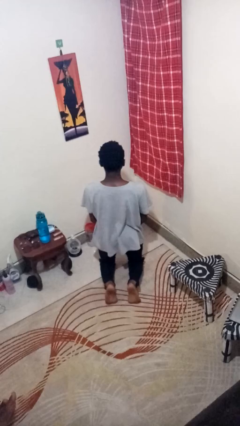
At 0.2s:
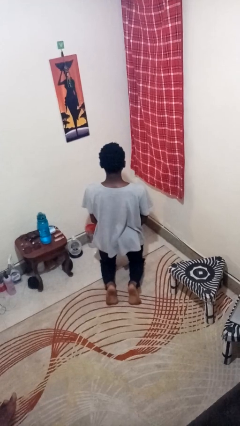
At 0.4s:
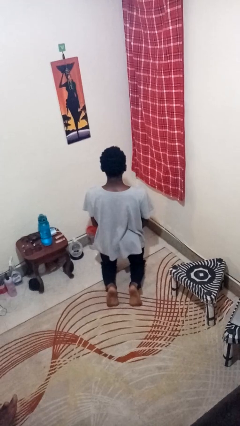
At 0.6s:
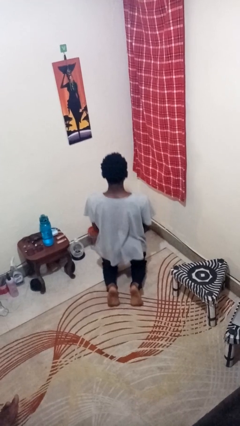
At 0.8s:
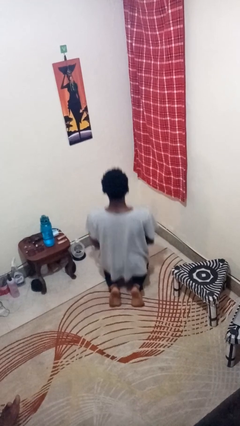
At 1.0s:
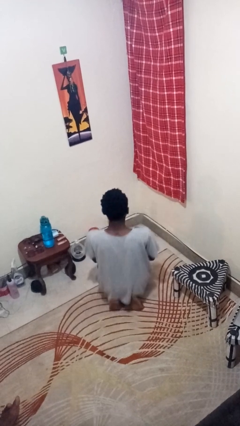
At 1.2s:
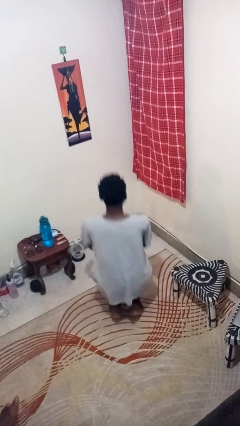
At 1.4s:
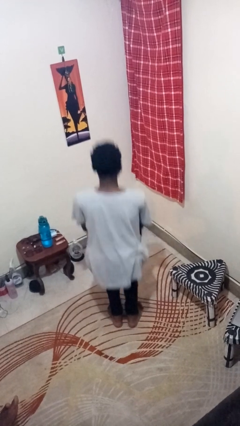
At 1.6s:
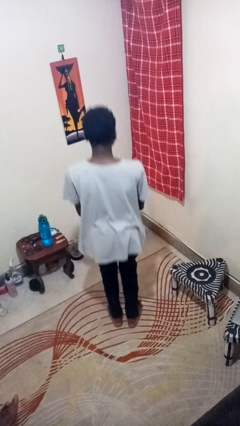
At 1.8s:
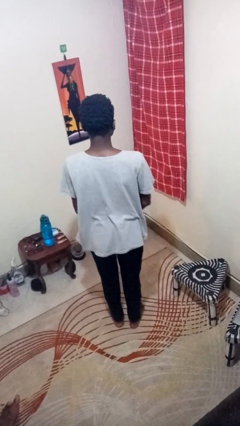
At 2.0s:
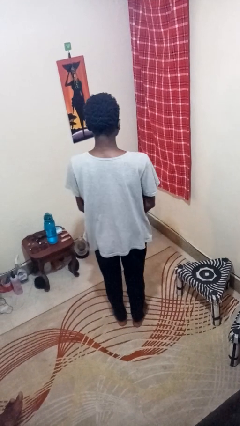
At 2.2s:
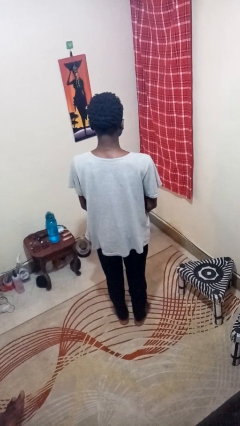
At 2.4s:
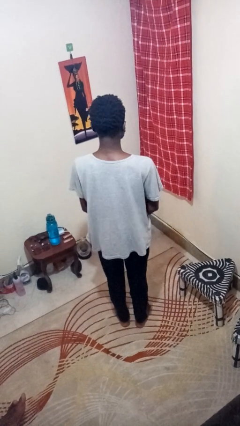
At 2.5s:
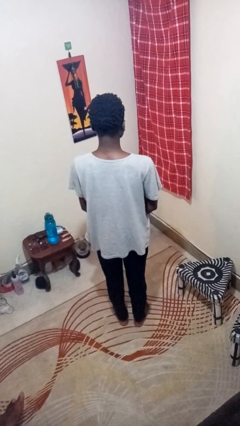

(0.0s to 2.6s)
person stands up from floor

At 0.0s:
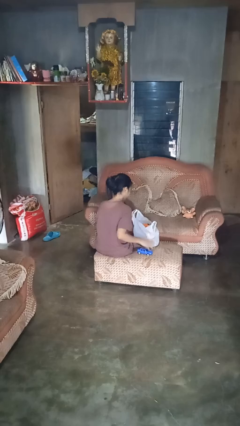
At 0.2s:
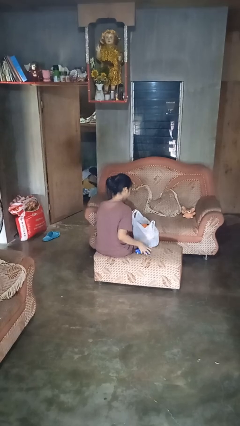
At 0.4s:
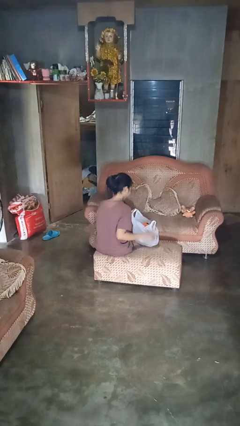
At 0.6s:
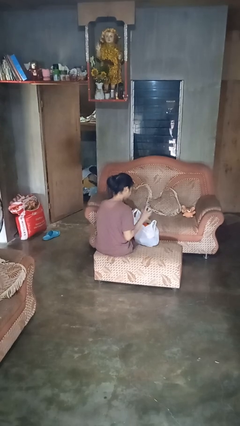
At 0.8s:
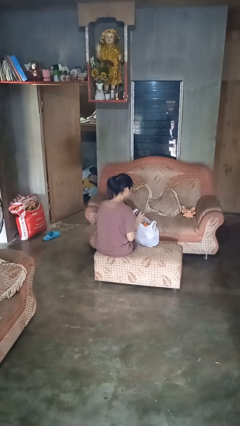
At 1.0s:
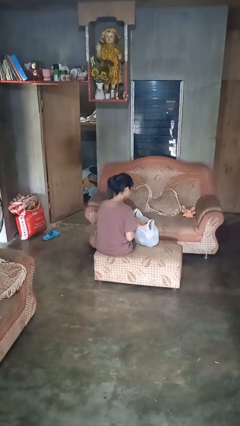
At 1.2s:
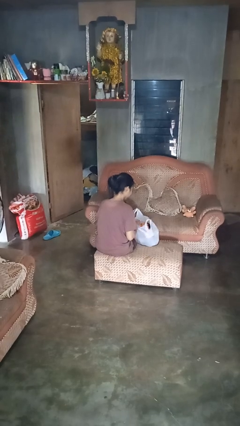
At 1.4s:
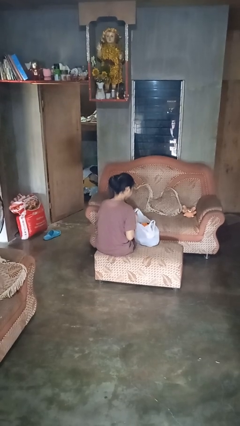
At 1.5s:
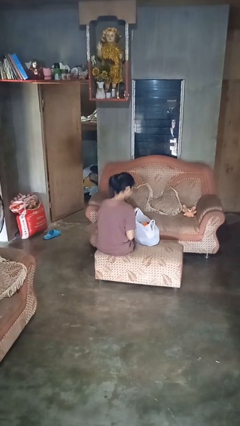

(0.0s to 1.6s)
person puts object into bag

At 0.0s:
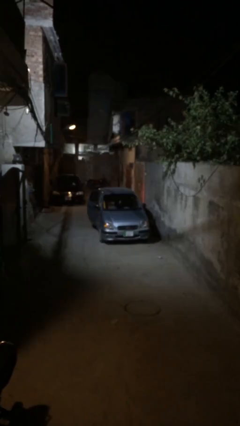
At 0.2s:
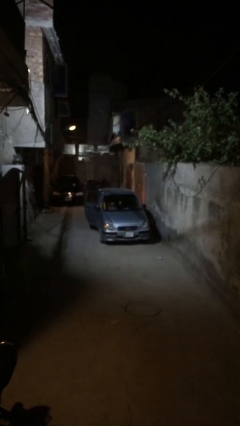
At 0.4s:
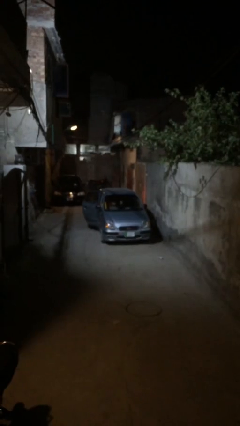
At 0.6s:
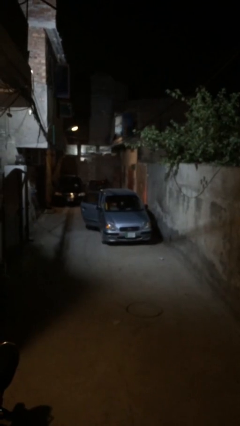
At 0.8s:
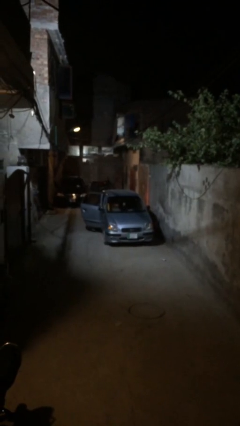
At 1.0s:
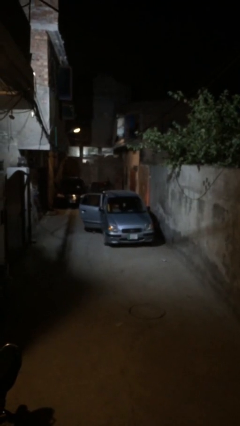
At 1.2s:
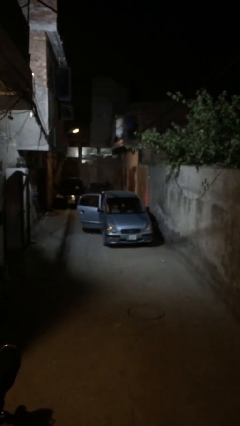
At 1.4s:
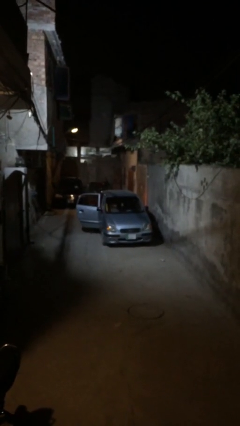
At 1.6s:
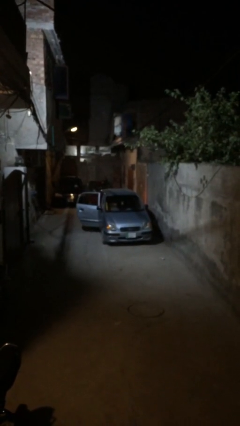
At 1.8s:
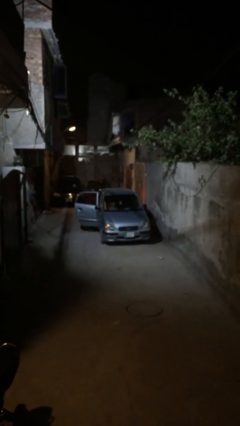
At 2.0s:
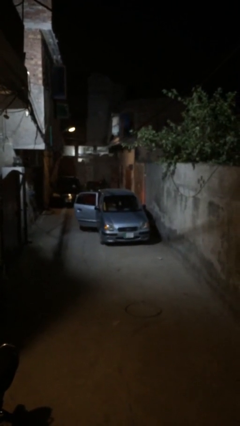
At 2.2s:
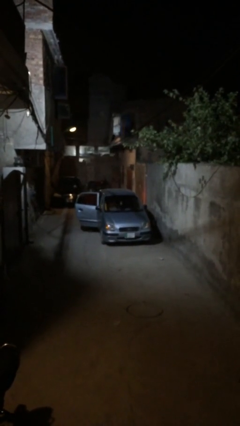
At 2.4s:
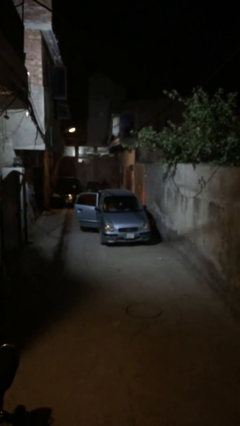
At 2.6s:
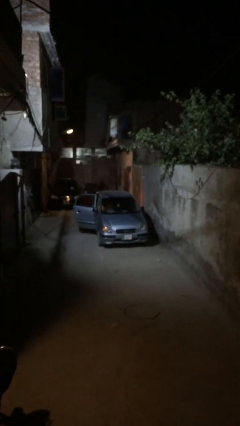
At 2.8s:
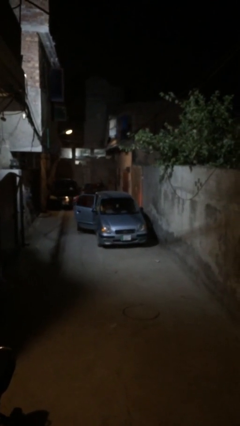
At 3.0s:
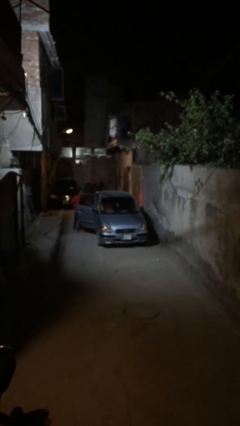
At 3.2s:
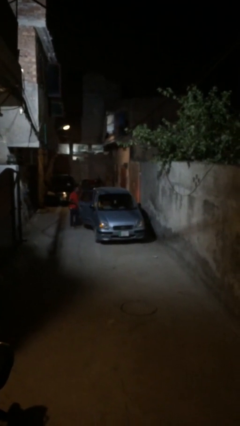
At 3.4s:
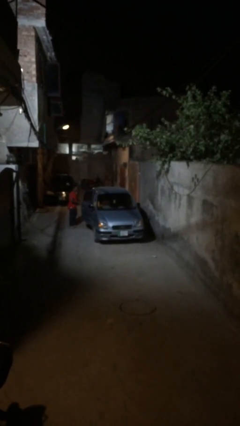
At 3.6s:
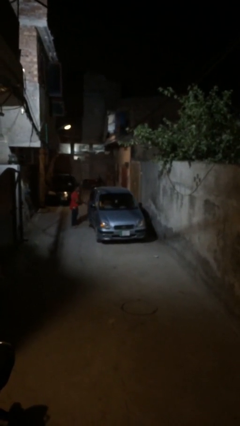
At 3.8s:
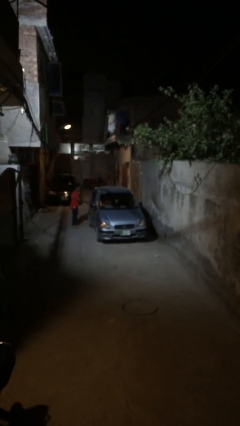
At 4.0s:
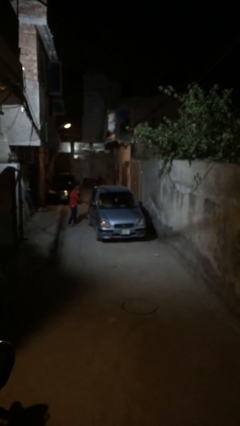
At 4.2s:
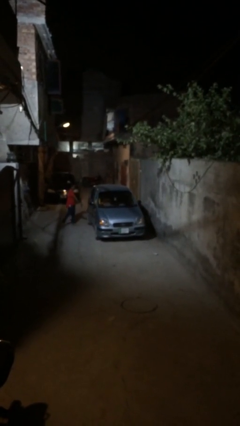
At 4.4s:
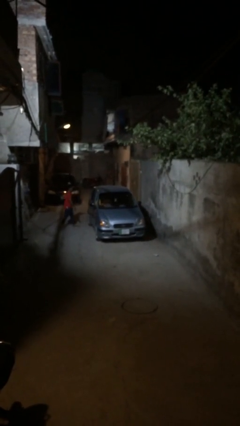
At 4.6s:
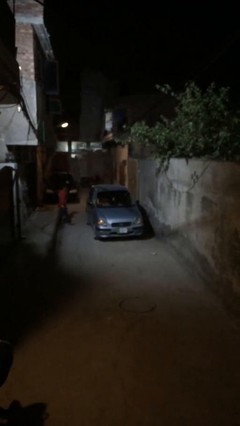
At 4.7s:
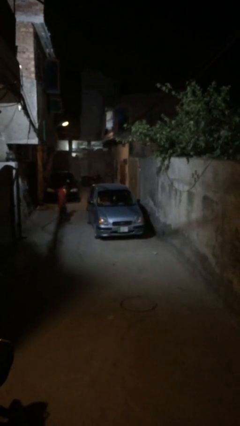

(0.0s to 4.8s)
car drops off person

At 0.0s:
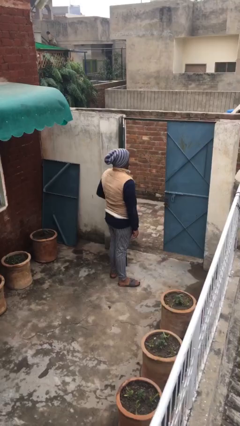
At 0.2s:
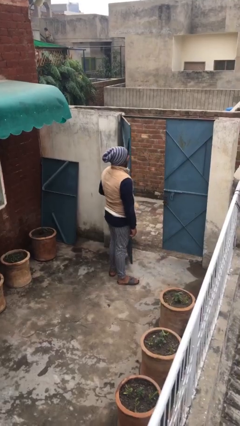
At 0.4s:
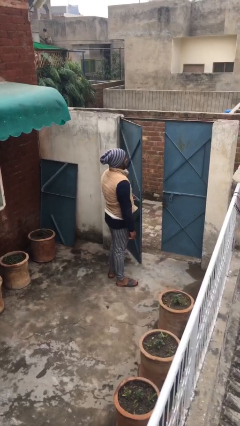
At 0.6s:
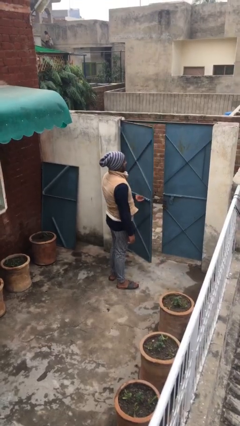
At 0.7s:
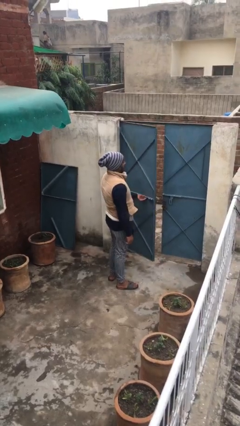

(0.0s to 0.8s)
person closes facility door

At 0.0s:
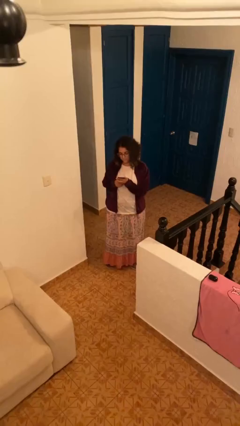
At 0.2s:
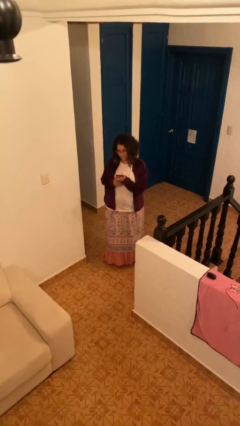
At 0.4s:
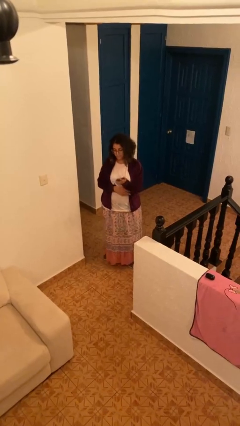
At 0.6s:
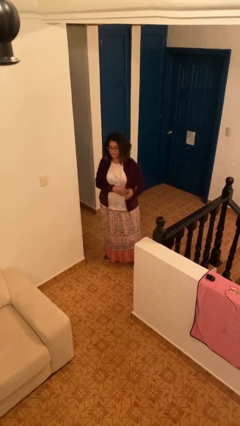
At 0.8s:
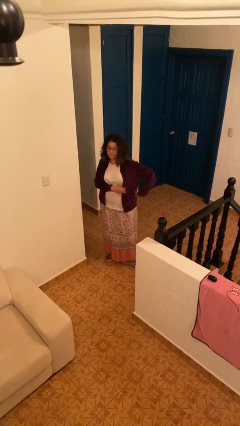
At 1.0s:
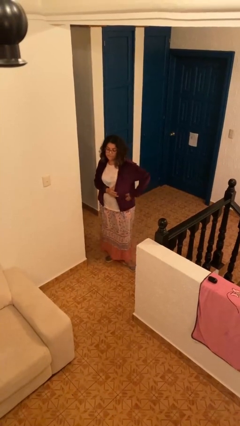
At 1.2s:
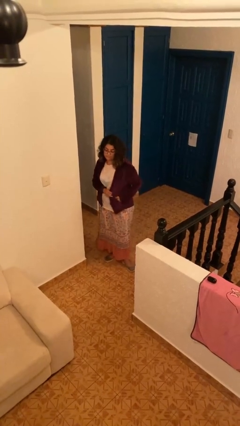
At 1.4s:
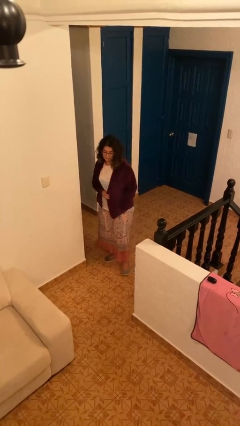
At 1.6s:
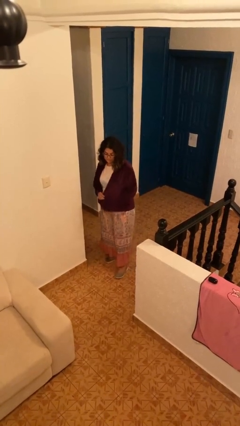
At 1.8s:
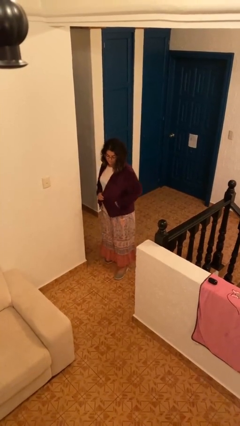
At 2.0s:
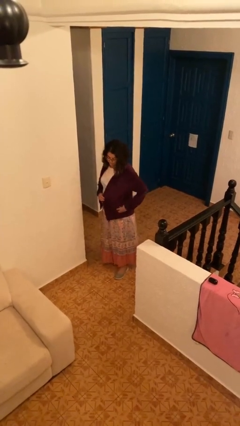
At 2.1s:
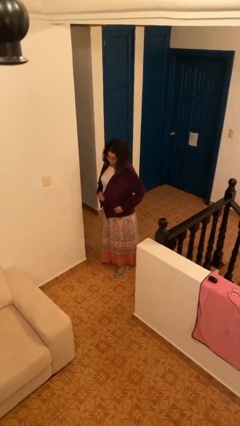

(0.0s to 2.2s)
person puts phone into pocket

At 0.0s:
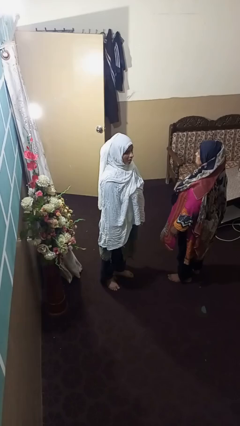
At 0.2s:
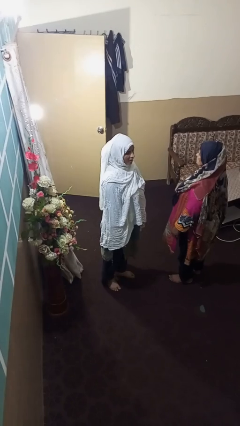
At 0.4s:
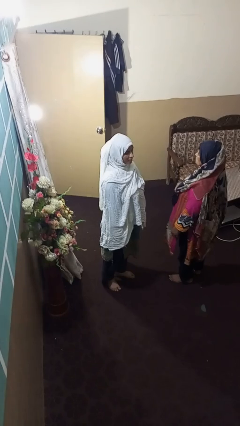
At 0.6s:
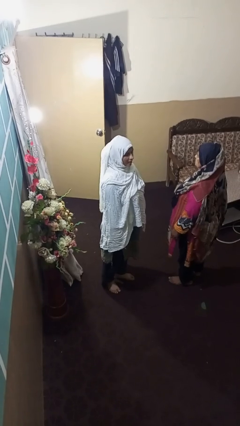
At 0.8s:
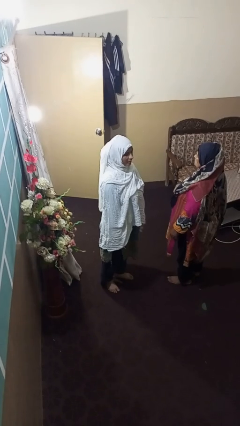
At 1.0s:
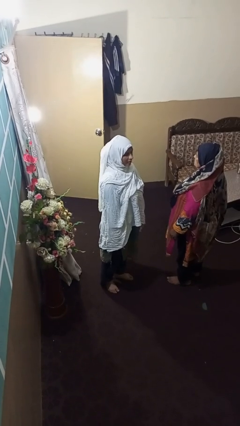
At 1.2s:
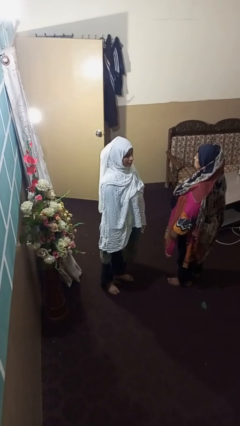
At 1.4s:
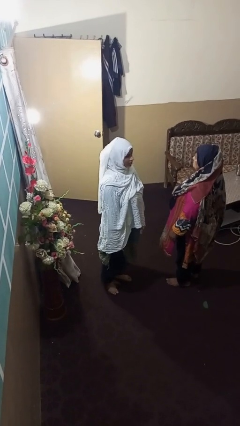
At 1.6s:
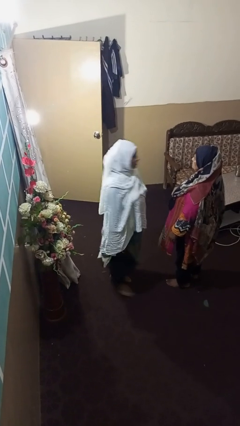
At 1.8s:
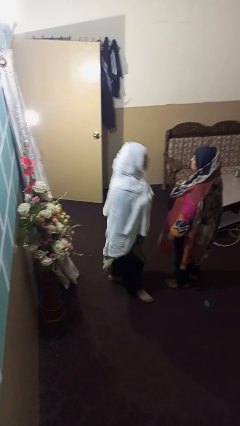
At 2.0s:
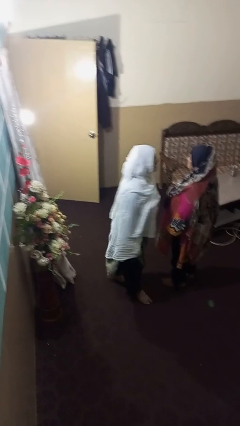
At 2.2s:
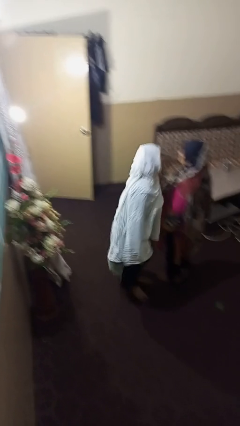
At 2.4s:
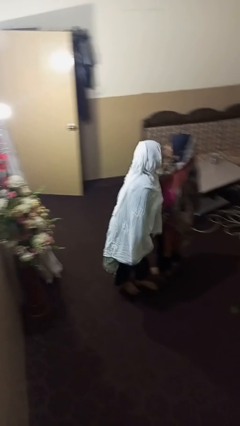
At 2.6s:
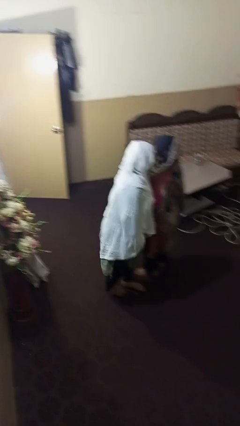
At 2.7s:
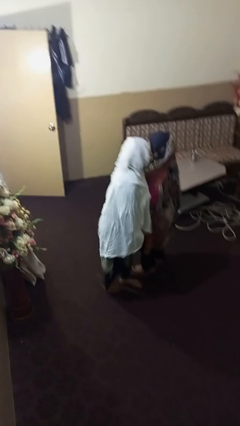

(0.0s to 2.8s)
person laughs with person

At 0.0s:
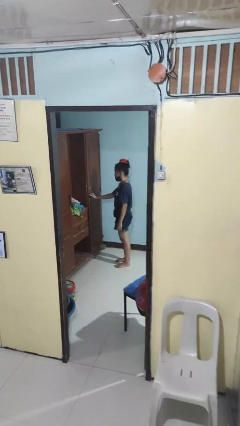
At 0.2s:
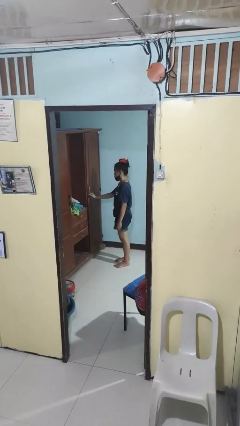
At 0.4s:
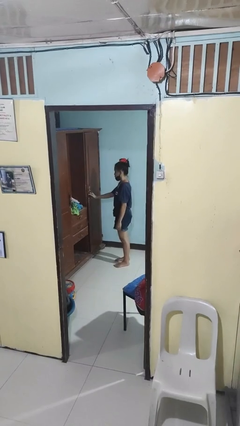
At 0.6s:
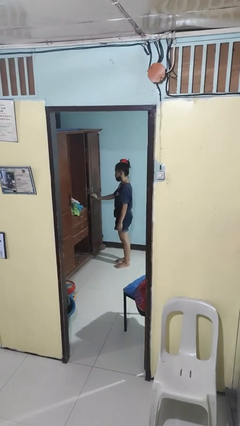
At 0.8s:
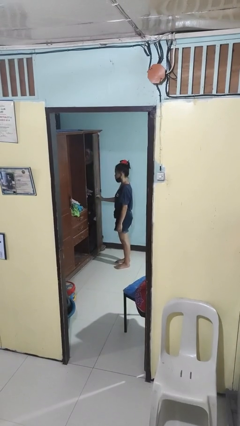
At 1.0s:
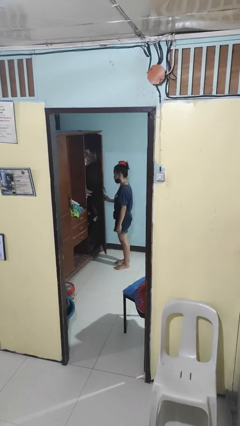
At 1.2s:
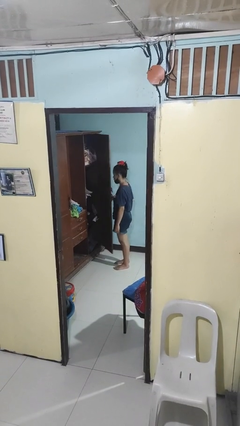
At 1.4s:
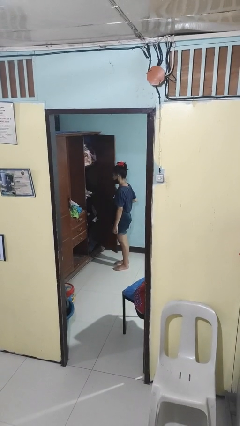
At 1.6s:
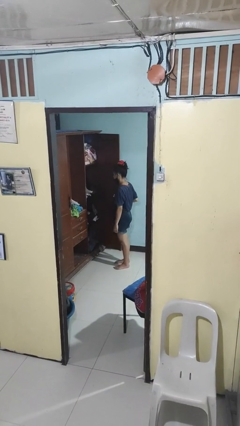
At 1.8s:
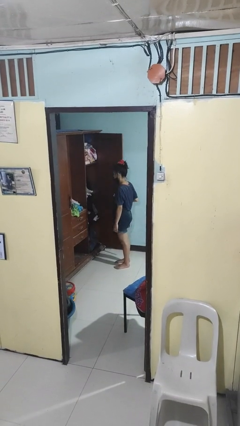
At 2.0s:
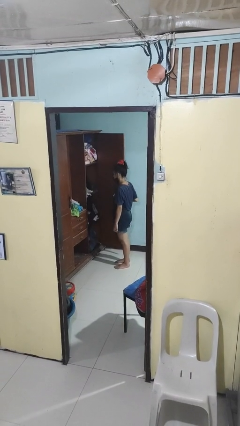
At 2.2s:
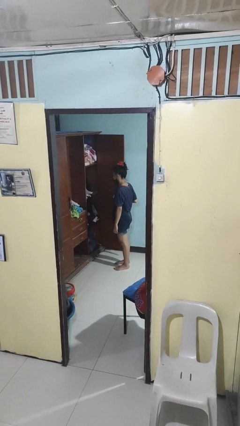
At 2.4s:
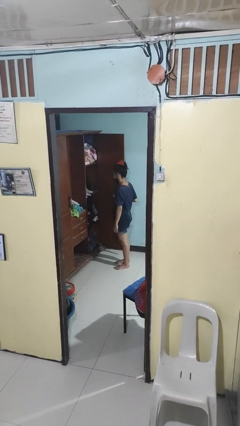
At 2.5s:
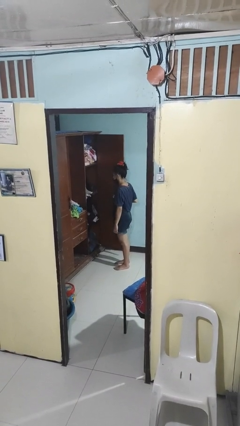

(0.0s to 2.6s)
person opens closet door
